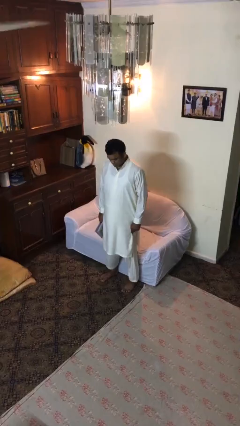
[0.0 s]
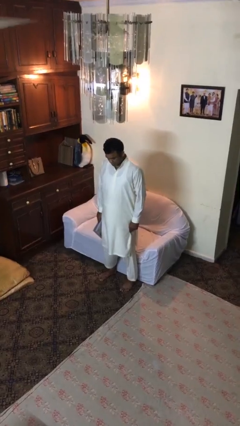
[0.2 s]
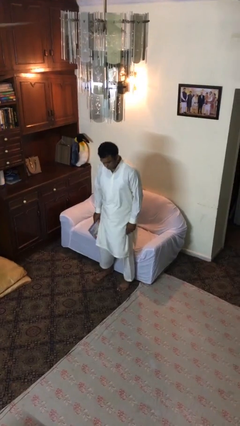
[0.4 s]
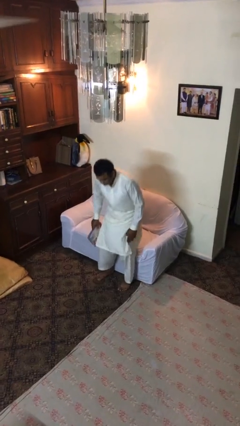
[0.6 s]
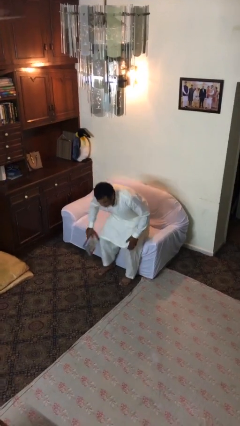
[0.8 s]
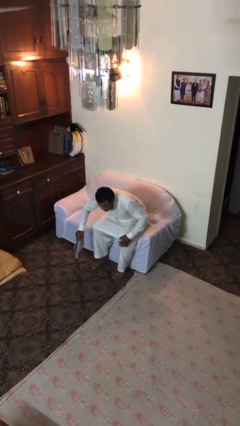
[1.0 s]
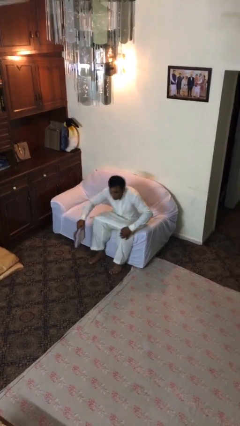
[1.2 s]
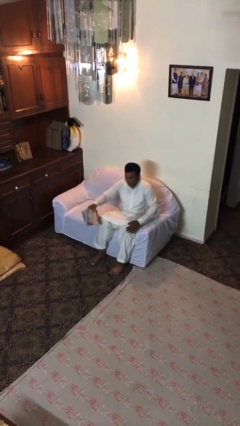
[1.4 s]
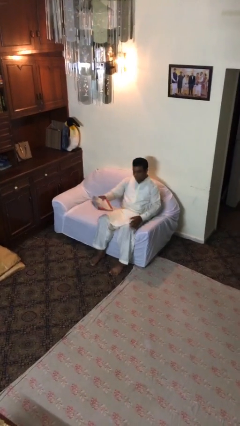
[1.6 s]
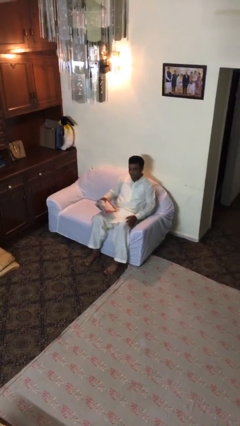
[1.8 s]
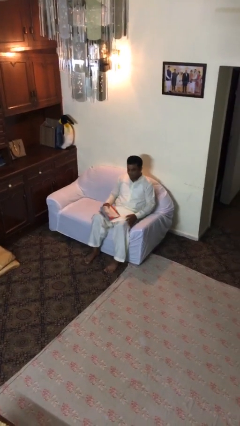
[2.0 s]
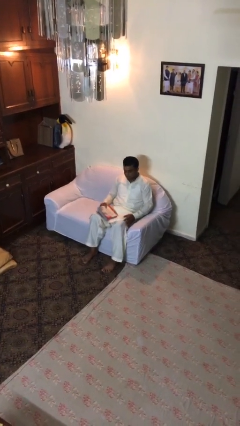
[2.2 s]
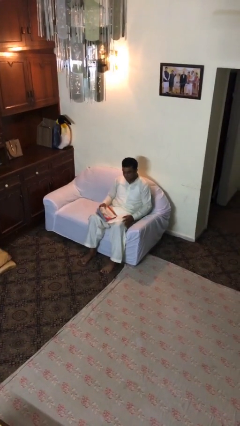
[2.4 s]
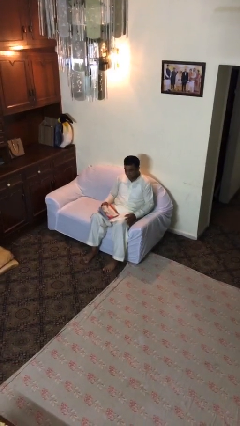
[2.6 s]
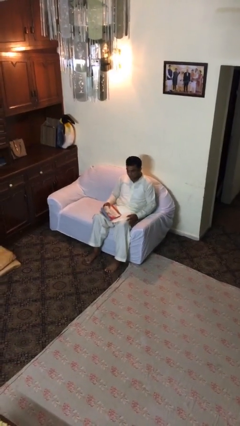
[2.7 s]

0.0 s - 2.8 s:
person sits down

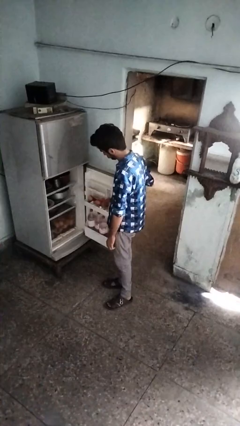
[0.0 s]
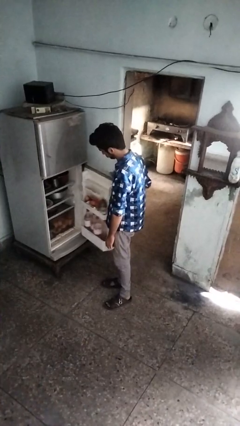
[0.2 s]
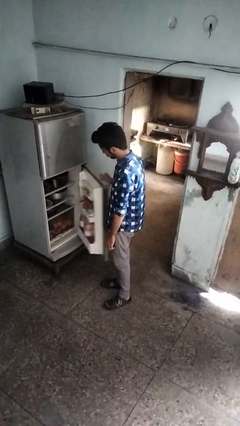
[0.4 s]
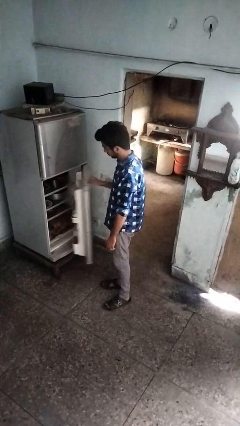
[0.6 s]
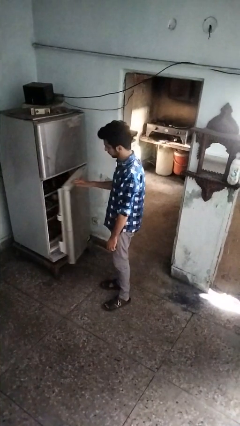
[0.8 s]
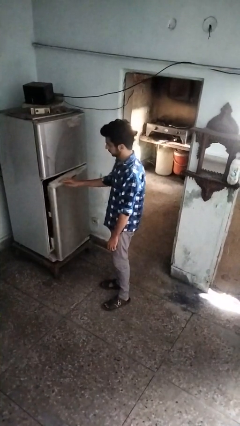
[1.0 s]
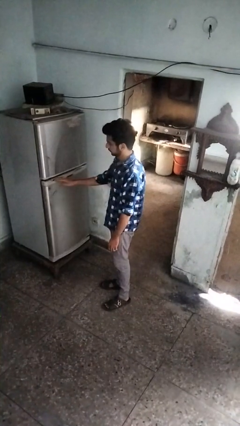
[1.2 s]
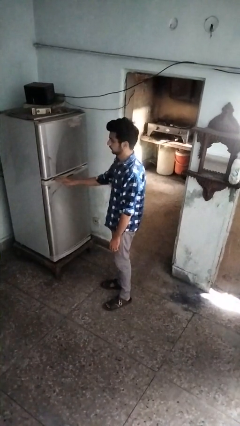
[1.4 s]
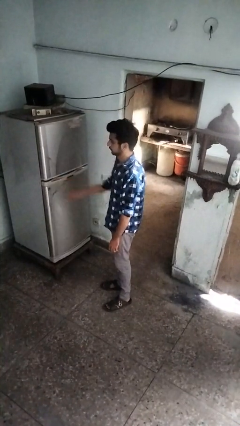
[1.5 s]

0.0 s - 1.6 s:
person closes refrigerator

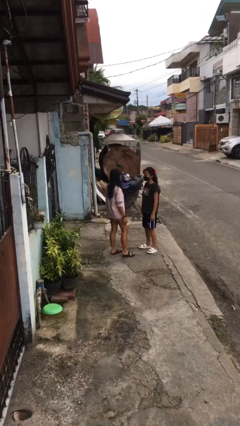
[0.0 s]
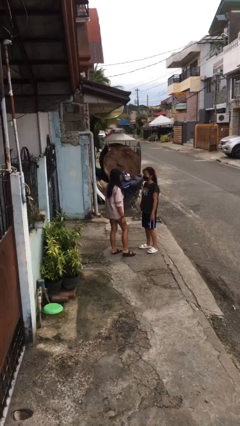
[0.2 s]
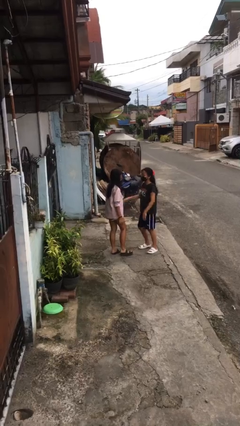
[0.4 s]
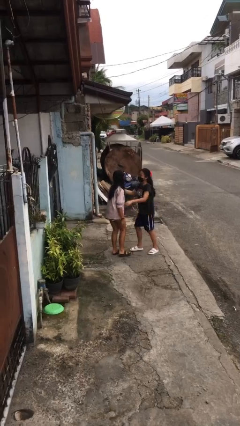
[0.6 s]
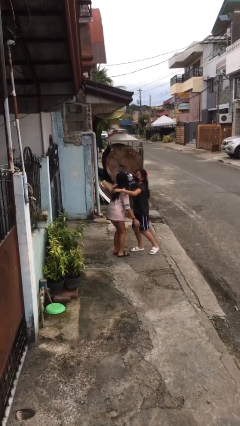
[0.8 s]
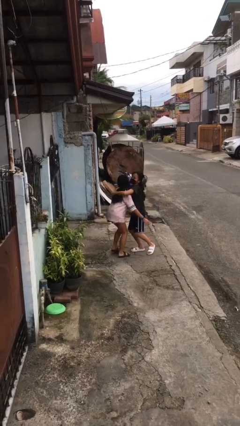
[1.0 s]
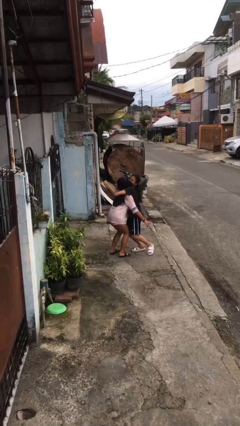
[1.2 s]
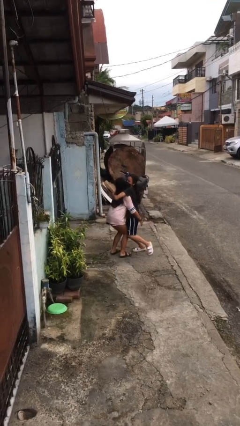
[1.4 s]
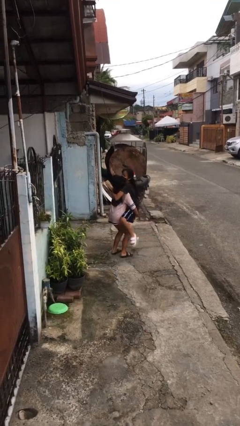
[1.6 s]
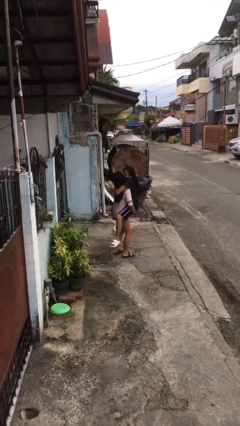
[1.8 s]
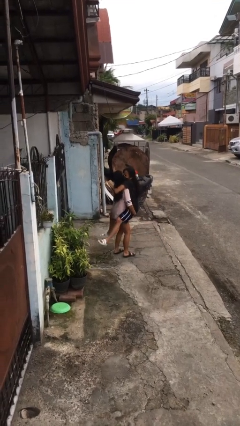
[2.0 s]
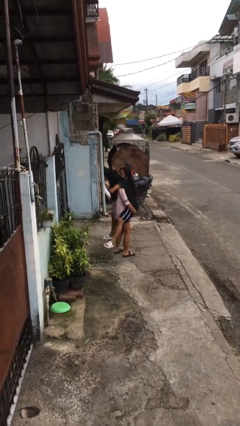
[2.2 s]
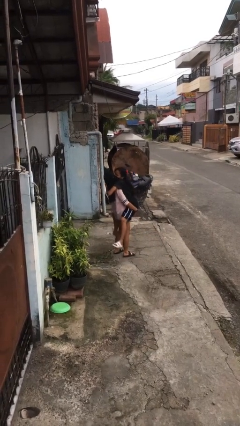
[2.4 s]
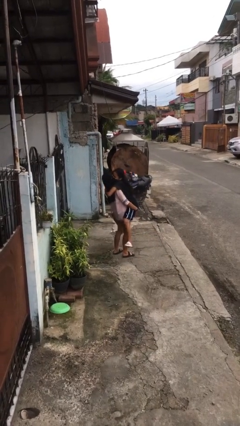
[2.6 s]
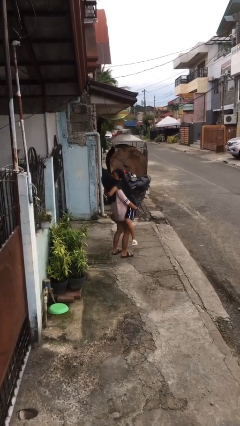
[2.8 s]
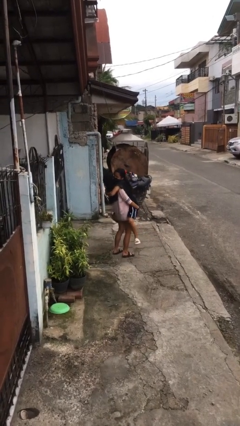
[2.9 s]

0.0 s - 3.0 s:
person picks up person

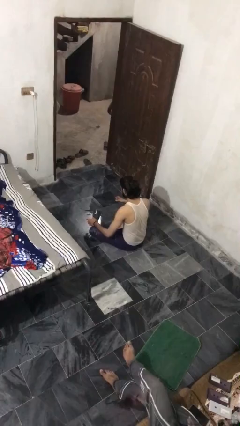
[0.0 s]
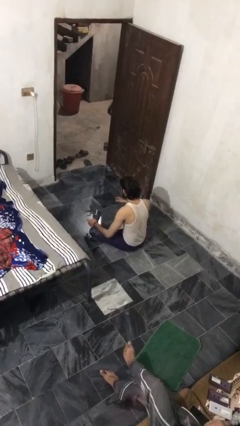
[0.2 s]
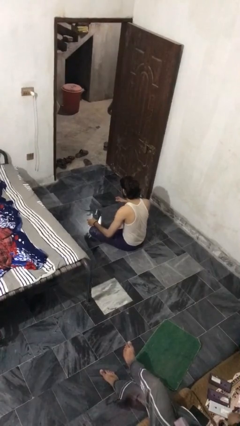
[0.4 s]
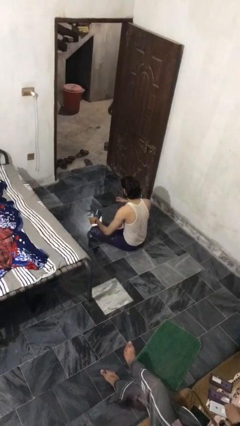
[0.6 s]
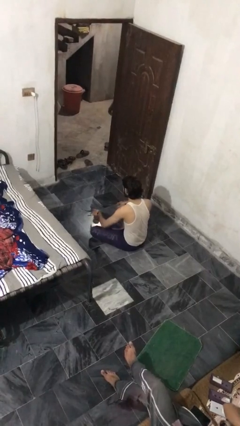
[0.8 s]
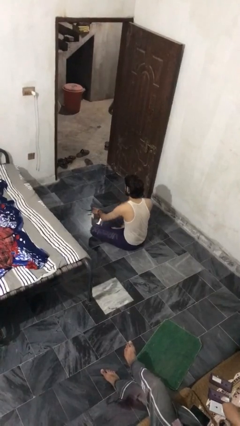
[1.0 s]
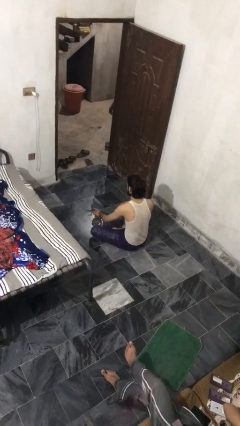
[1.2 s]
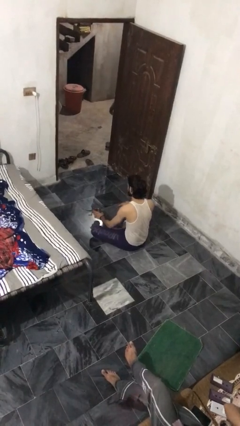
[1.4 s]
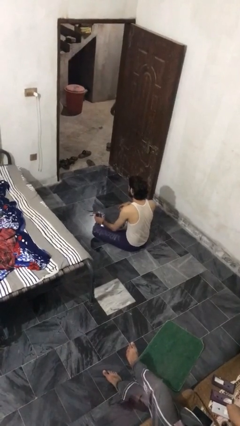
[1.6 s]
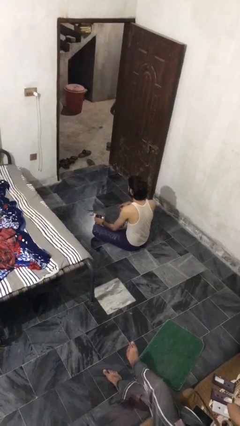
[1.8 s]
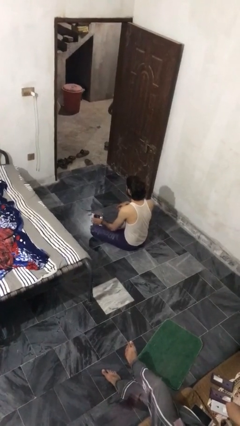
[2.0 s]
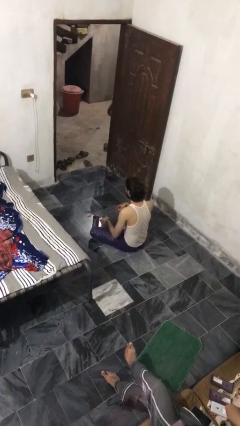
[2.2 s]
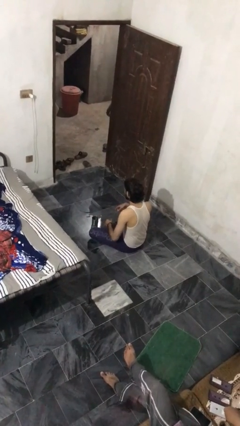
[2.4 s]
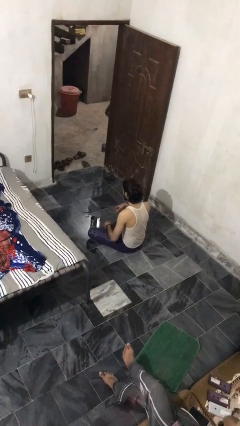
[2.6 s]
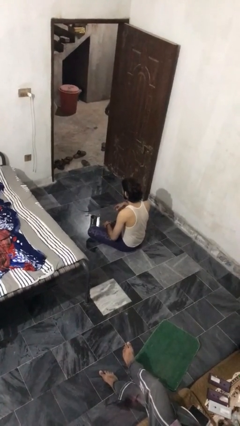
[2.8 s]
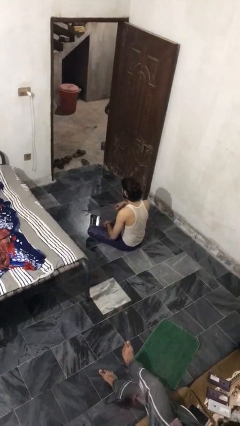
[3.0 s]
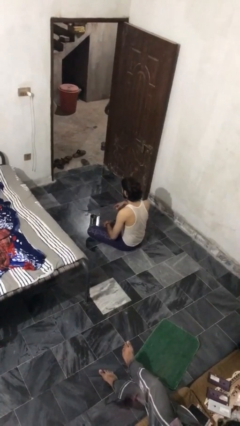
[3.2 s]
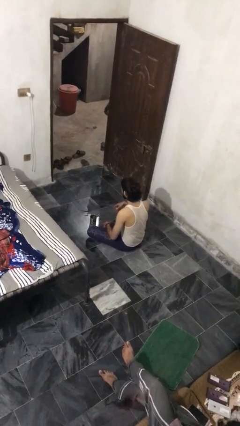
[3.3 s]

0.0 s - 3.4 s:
person sets upright glass

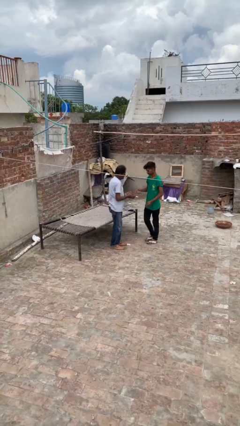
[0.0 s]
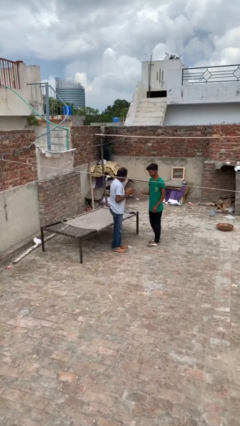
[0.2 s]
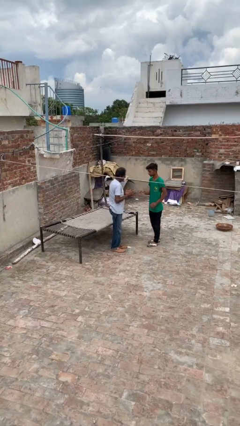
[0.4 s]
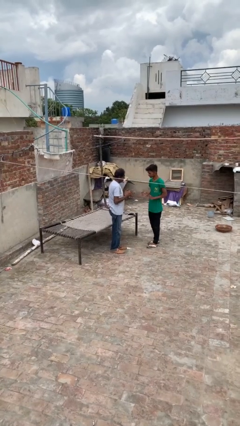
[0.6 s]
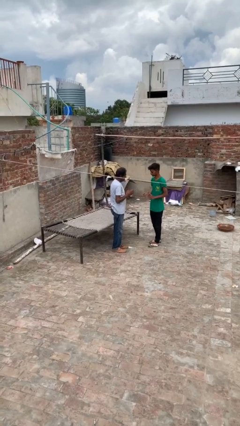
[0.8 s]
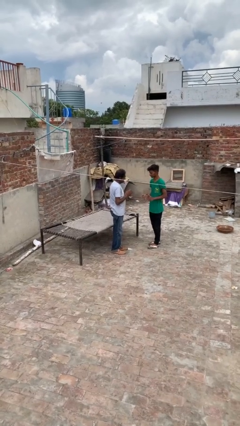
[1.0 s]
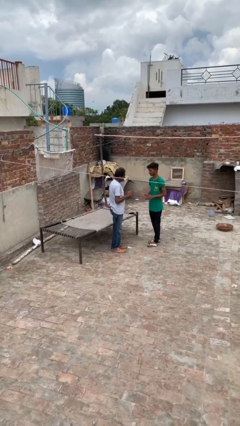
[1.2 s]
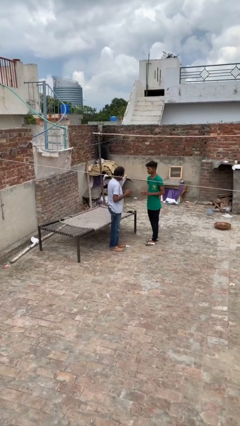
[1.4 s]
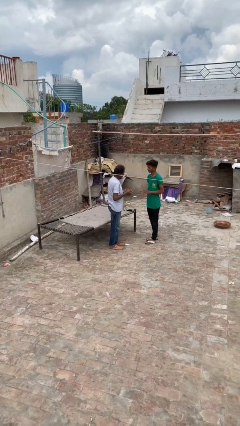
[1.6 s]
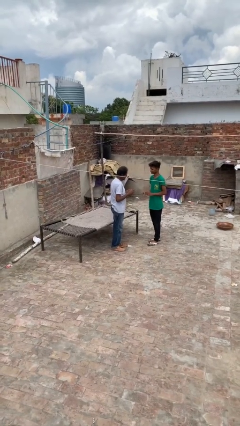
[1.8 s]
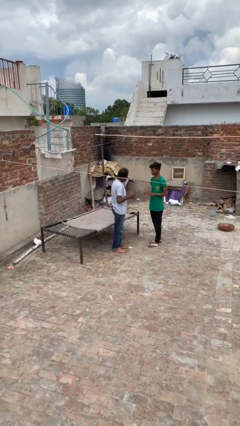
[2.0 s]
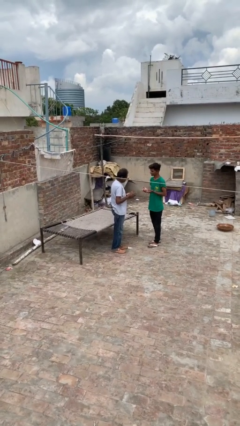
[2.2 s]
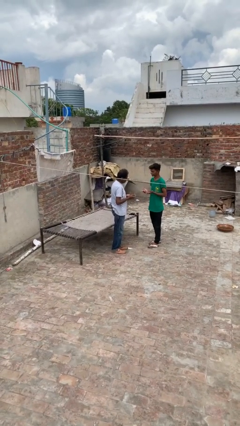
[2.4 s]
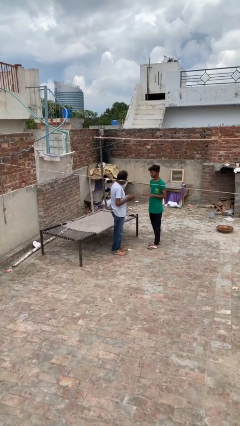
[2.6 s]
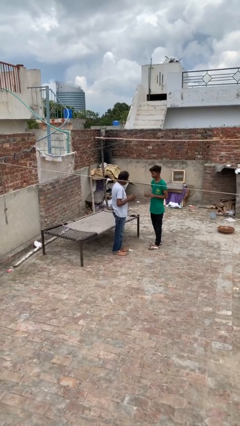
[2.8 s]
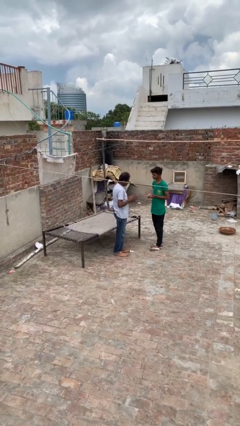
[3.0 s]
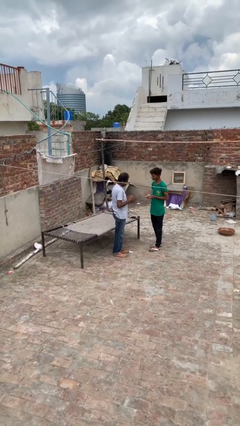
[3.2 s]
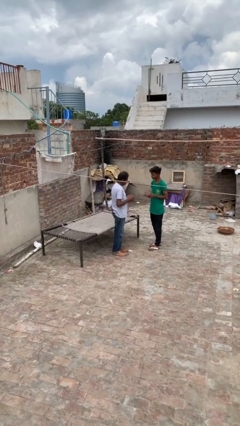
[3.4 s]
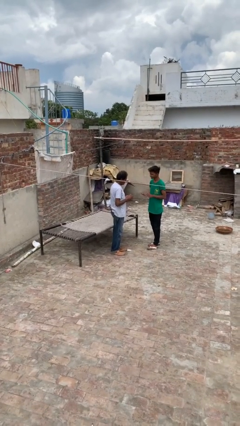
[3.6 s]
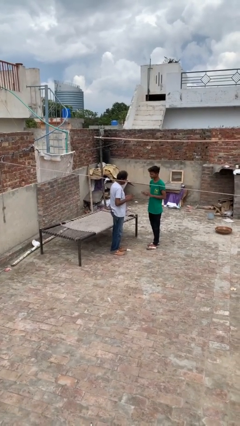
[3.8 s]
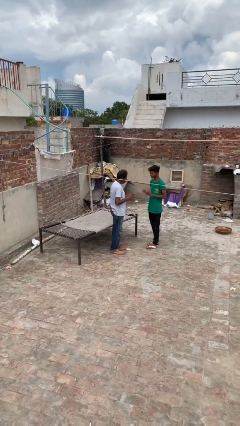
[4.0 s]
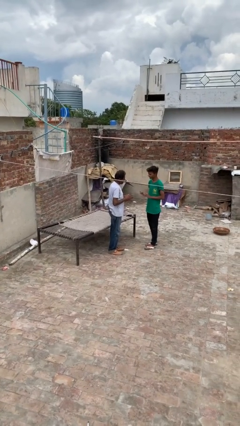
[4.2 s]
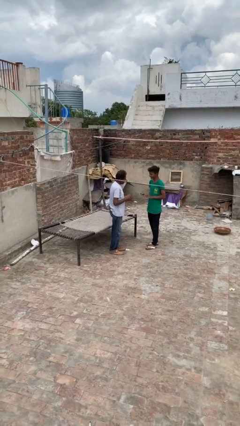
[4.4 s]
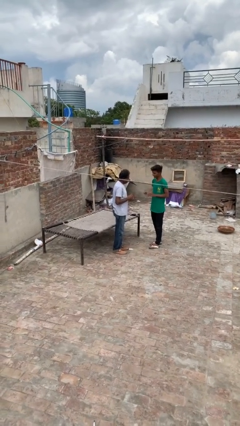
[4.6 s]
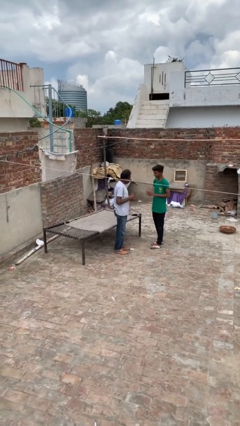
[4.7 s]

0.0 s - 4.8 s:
person talks to person

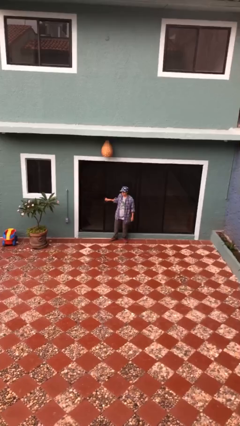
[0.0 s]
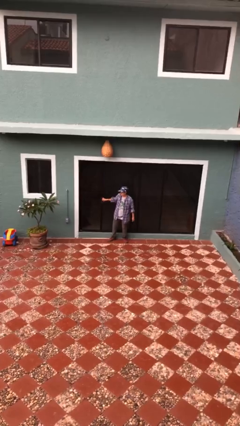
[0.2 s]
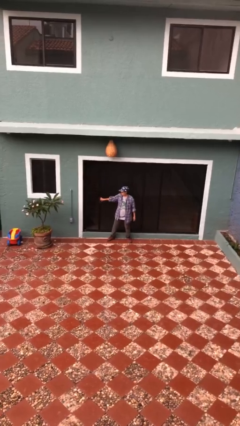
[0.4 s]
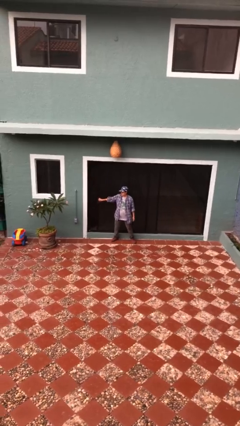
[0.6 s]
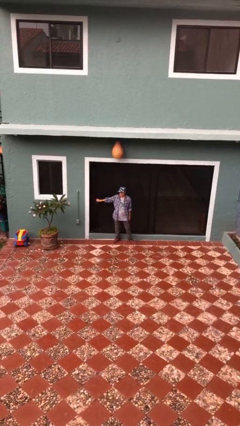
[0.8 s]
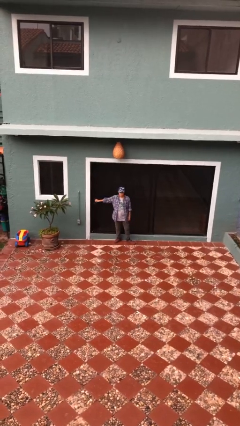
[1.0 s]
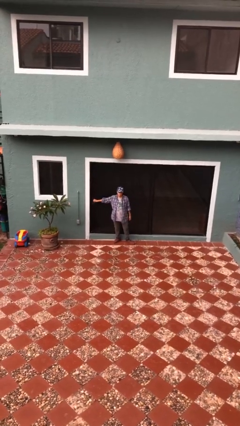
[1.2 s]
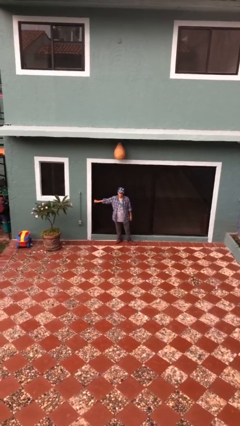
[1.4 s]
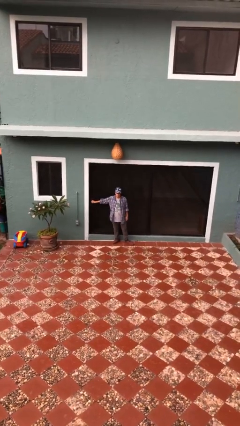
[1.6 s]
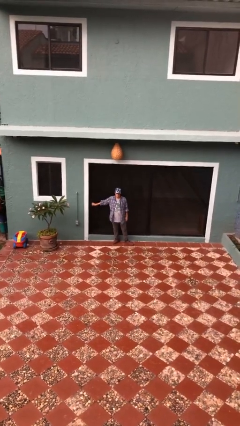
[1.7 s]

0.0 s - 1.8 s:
person closes sliding door

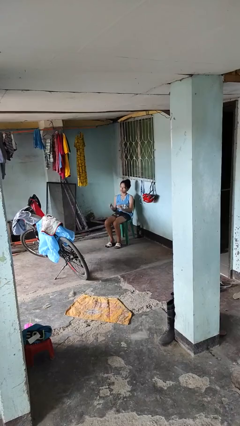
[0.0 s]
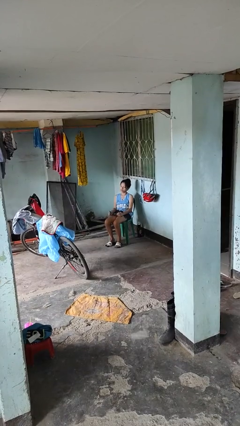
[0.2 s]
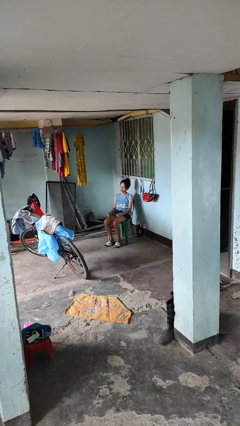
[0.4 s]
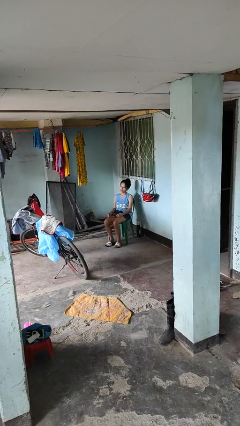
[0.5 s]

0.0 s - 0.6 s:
person takes off glasses
